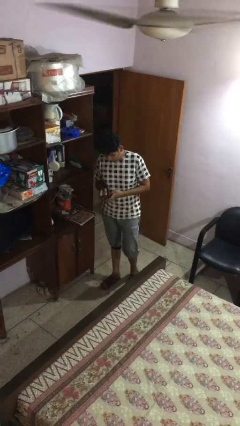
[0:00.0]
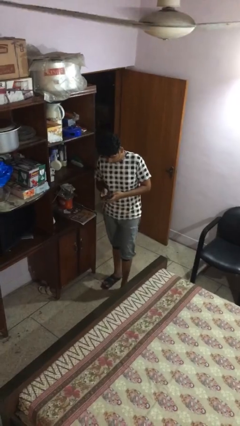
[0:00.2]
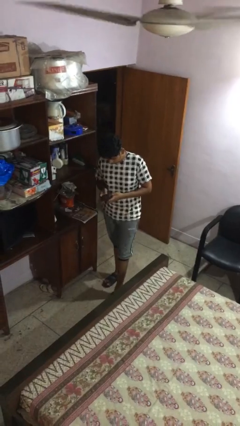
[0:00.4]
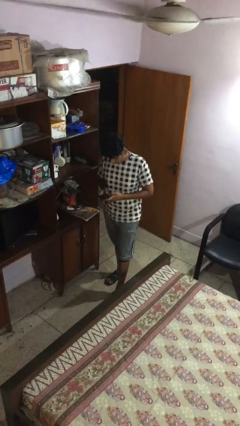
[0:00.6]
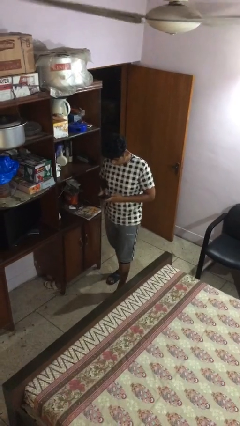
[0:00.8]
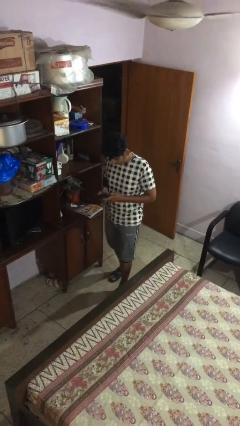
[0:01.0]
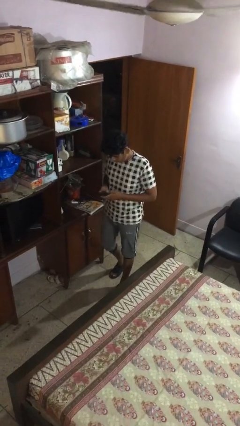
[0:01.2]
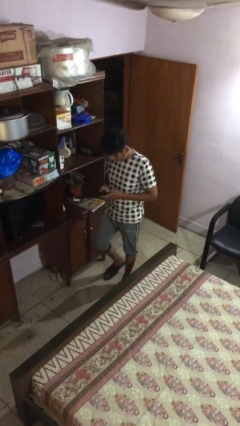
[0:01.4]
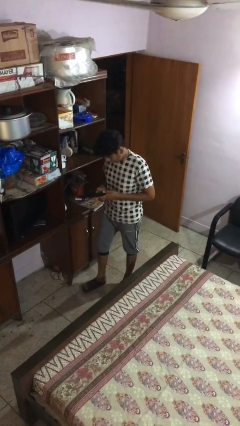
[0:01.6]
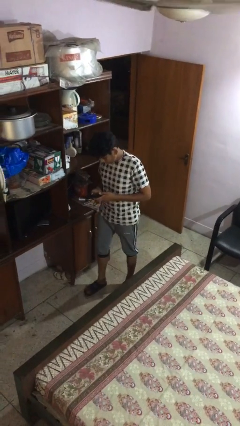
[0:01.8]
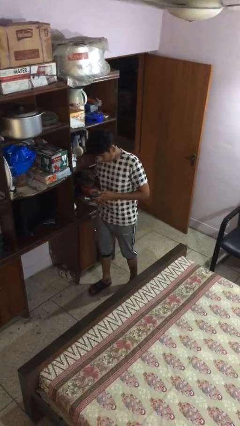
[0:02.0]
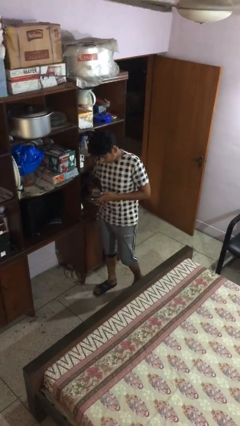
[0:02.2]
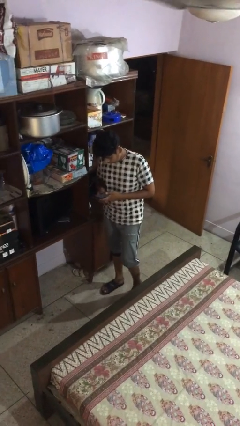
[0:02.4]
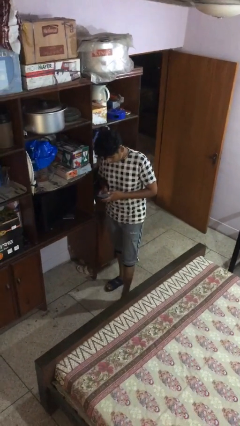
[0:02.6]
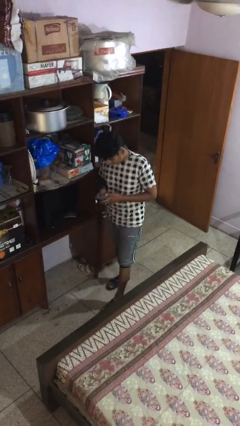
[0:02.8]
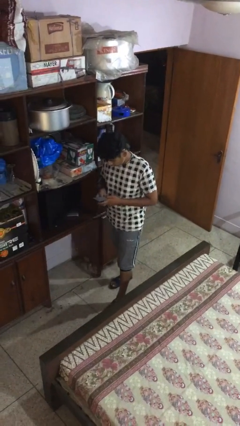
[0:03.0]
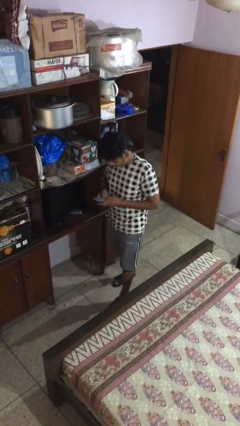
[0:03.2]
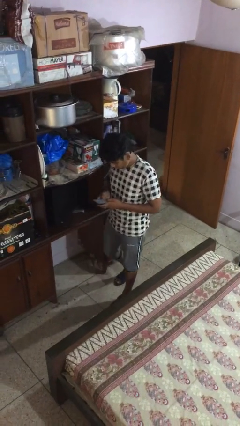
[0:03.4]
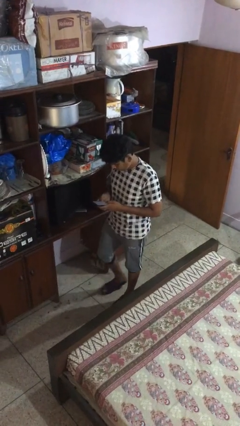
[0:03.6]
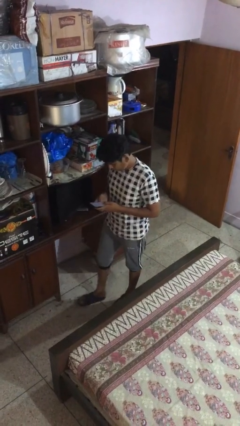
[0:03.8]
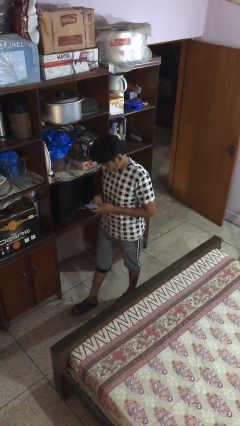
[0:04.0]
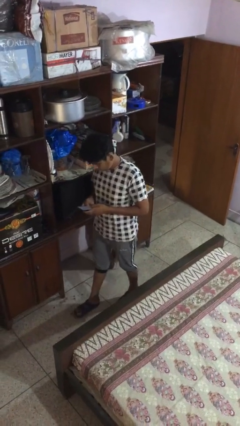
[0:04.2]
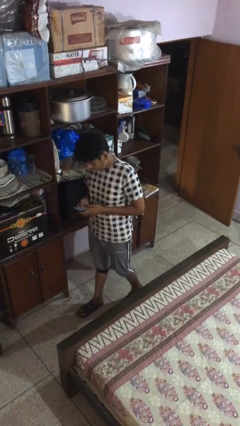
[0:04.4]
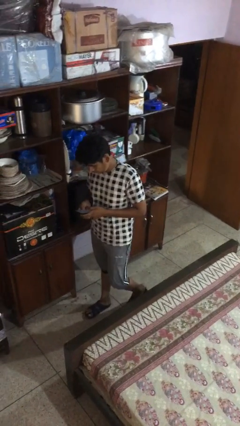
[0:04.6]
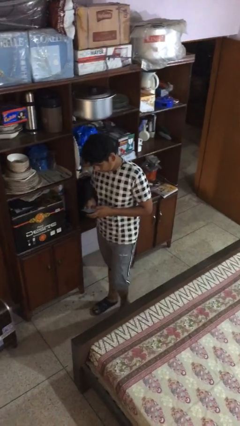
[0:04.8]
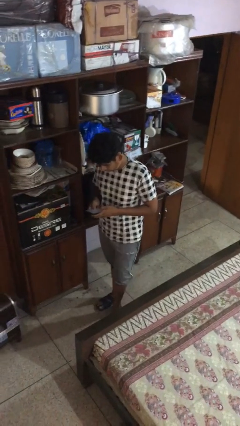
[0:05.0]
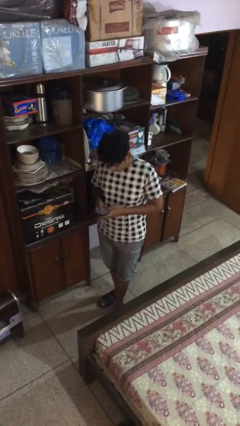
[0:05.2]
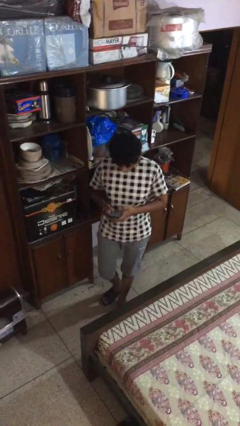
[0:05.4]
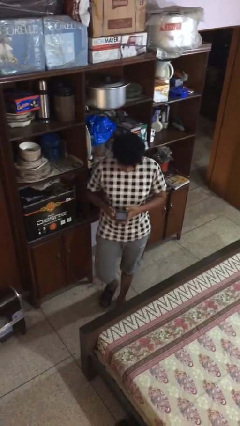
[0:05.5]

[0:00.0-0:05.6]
person texts on phone

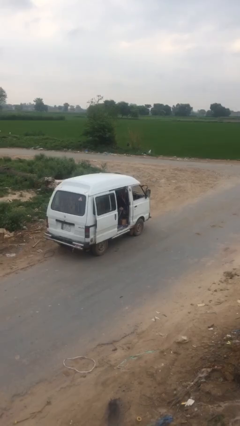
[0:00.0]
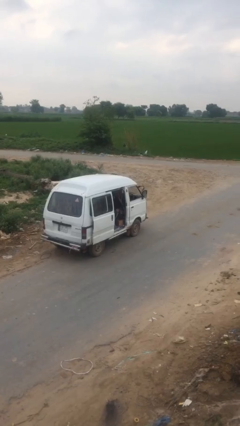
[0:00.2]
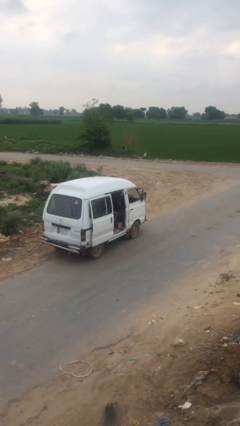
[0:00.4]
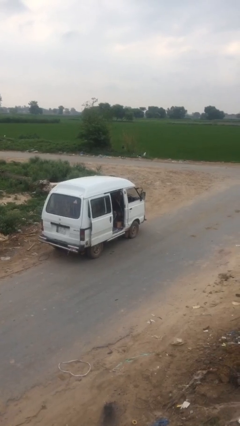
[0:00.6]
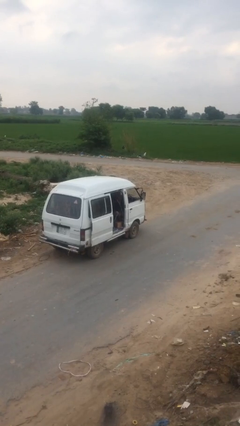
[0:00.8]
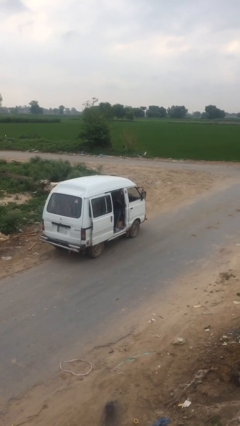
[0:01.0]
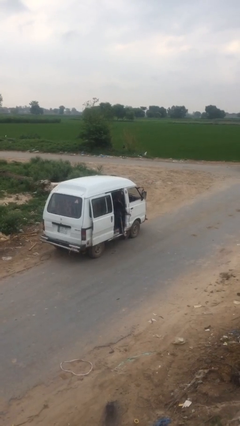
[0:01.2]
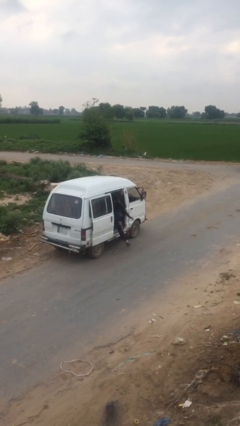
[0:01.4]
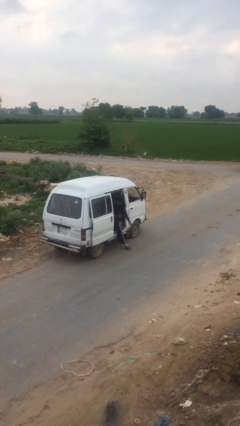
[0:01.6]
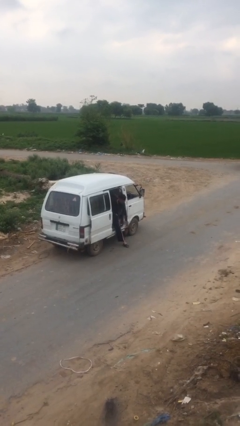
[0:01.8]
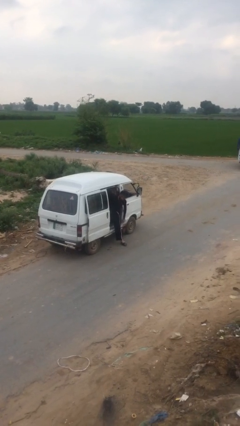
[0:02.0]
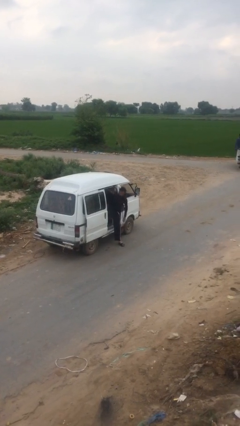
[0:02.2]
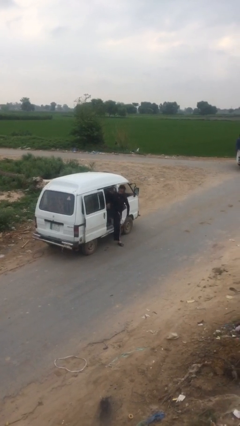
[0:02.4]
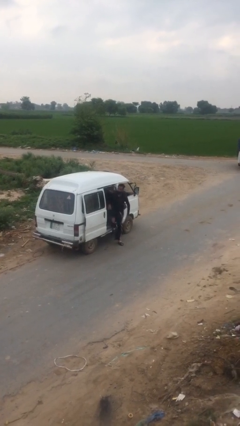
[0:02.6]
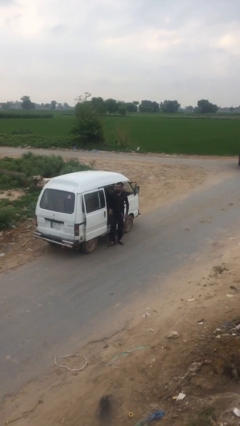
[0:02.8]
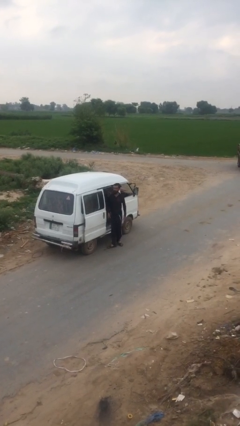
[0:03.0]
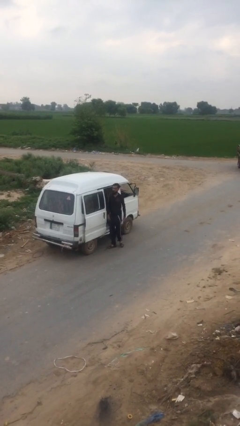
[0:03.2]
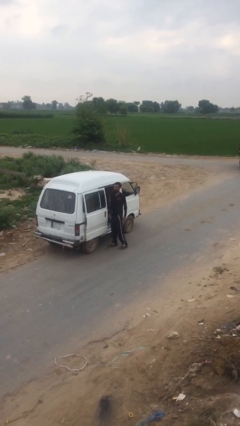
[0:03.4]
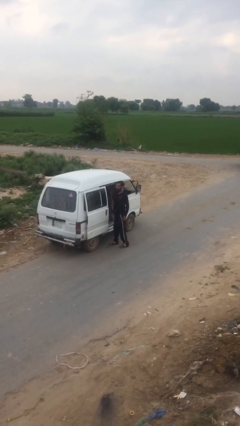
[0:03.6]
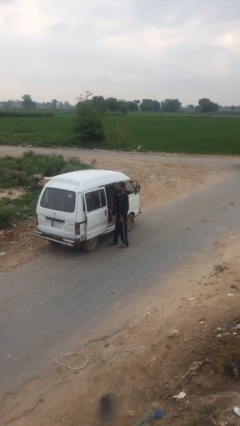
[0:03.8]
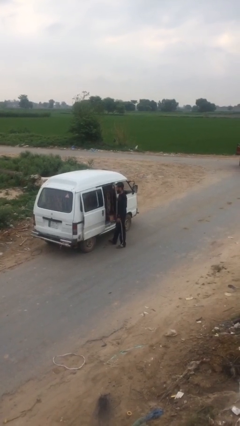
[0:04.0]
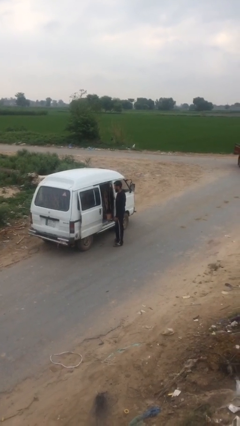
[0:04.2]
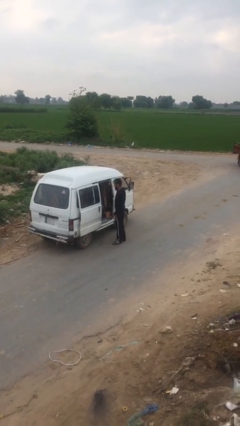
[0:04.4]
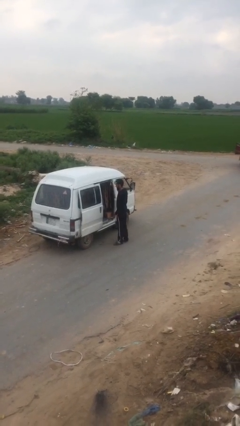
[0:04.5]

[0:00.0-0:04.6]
person exits car

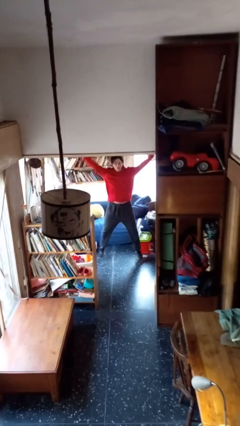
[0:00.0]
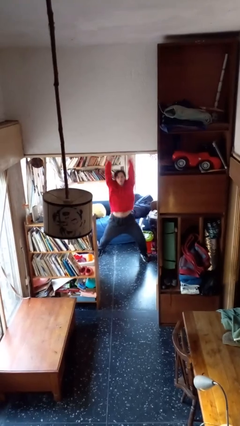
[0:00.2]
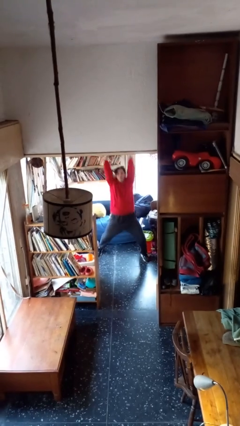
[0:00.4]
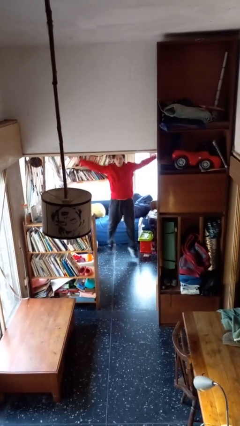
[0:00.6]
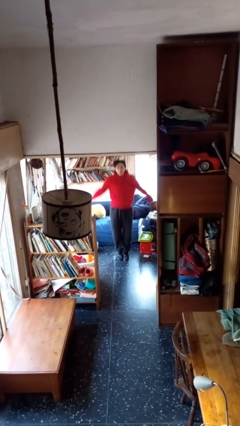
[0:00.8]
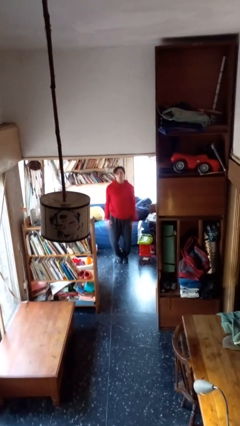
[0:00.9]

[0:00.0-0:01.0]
person exercises with jumping jacks

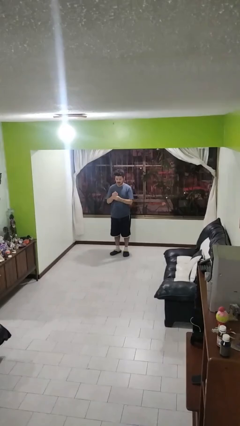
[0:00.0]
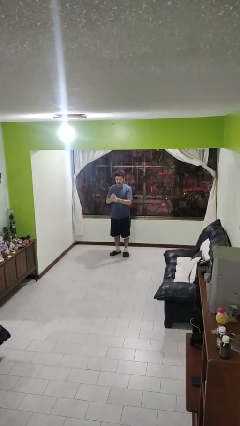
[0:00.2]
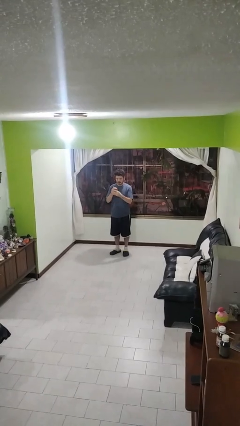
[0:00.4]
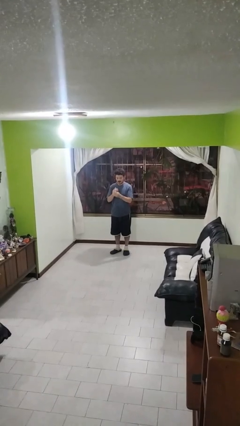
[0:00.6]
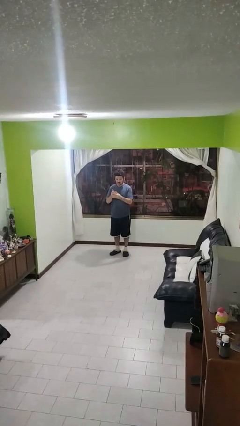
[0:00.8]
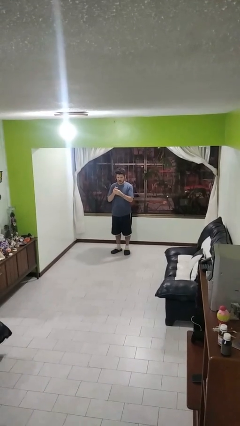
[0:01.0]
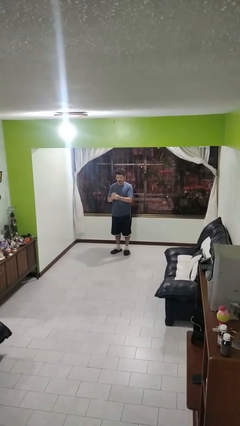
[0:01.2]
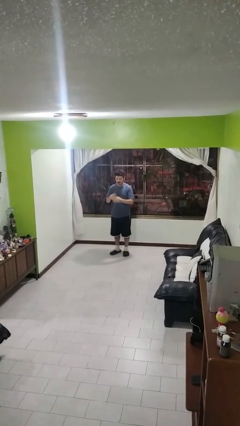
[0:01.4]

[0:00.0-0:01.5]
person snaps fingers

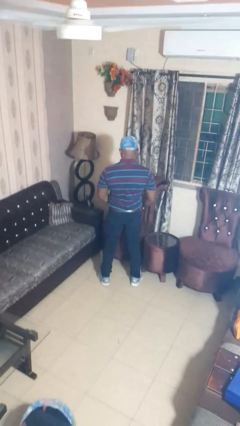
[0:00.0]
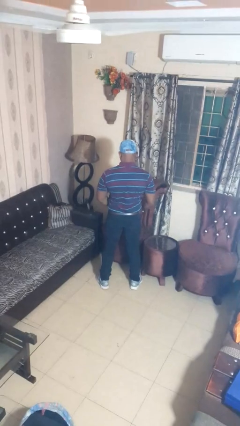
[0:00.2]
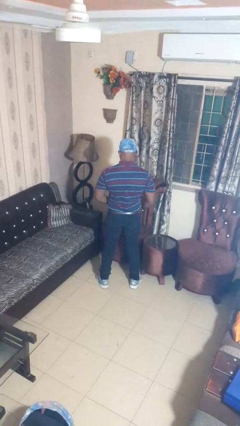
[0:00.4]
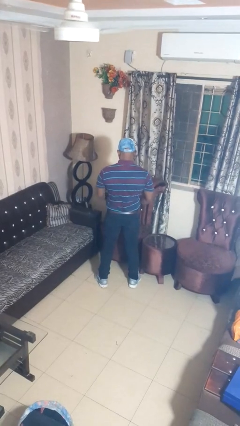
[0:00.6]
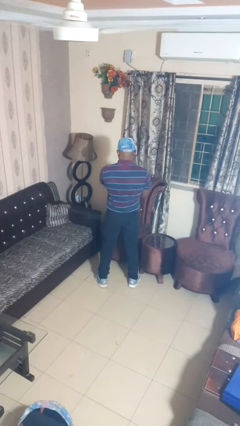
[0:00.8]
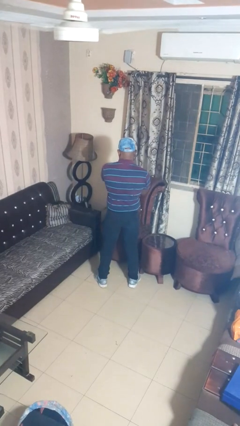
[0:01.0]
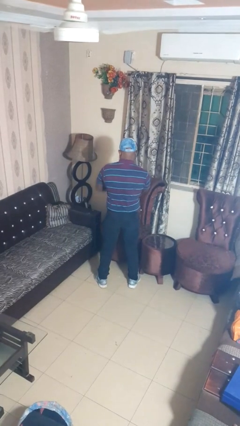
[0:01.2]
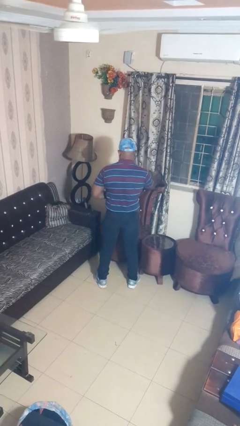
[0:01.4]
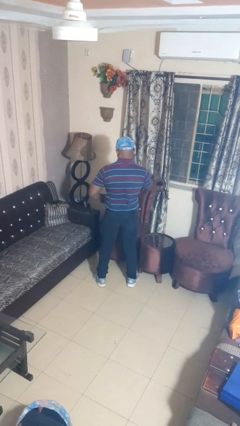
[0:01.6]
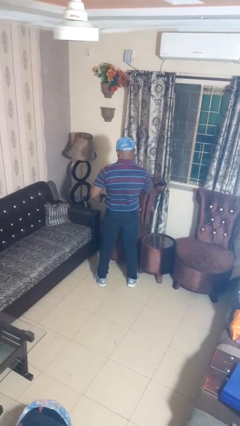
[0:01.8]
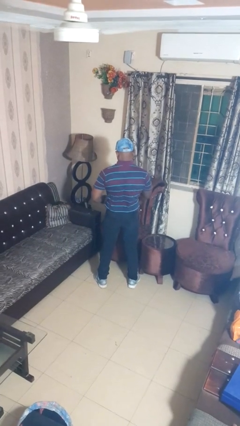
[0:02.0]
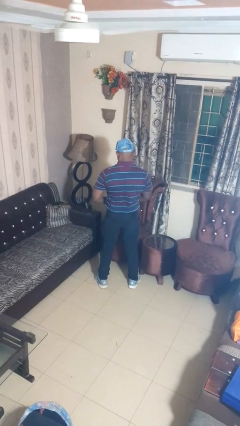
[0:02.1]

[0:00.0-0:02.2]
person takes off belt

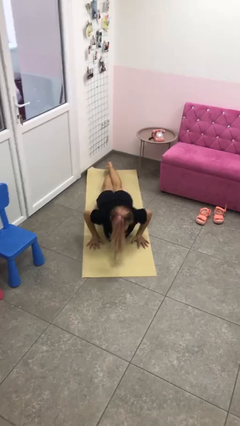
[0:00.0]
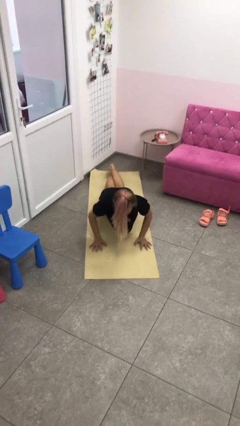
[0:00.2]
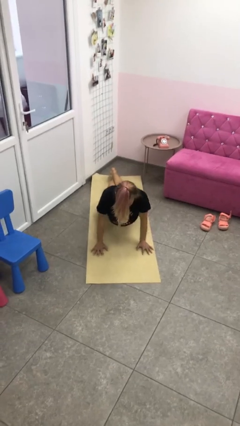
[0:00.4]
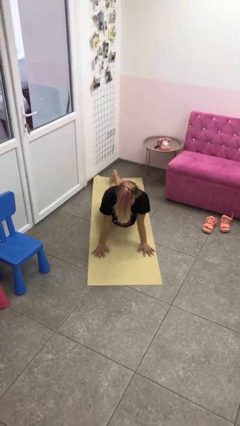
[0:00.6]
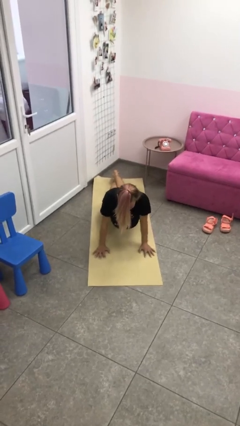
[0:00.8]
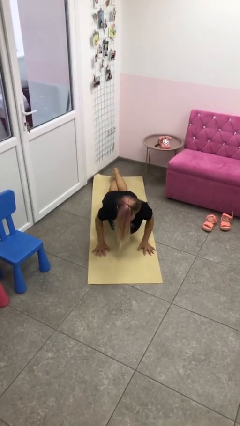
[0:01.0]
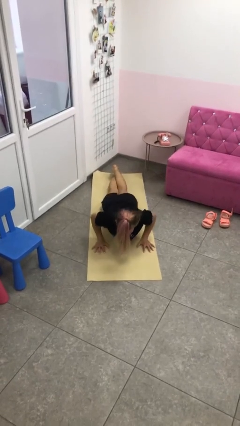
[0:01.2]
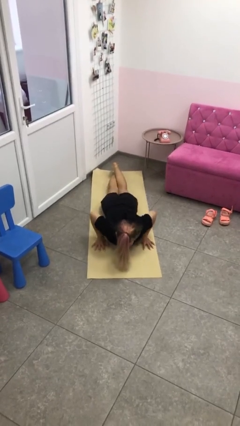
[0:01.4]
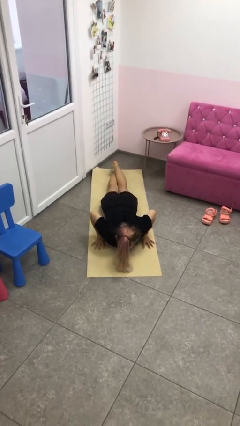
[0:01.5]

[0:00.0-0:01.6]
person exercises with pushup

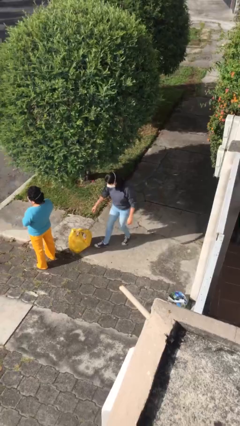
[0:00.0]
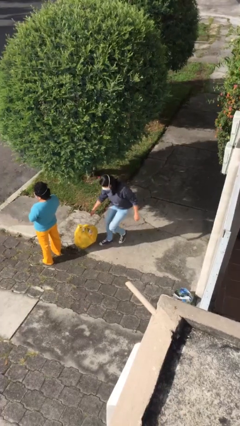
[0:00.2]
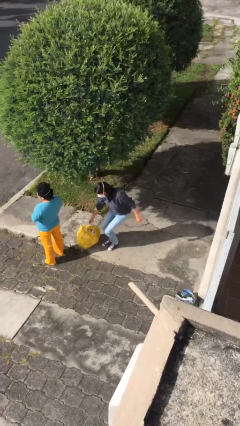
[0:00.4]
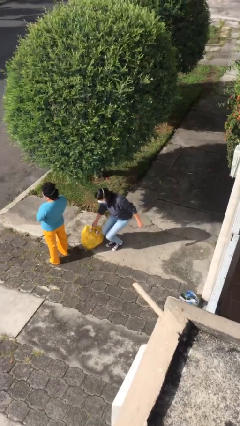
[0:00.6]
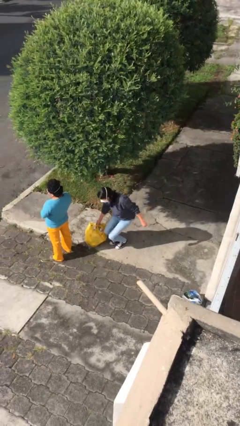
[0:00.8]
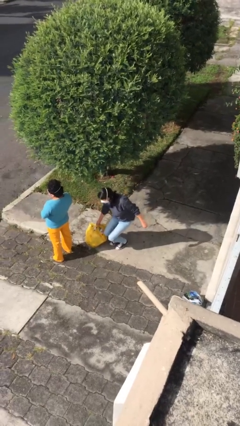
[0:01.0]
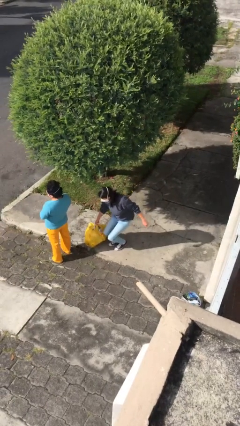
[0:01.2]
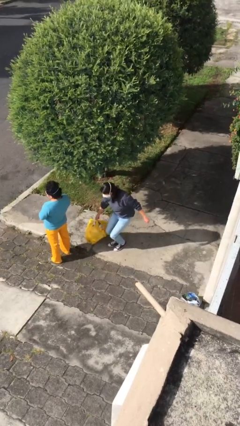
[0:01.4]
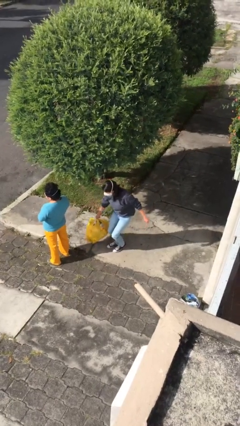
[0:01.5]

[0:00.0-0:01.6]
person steals object from person
